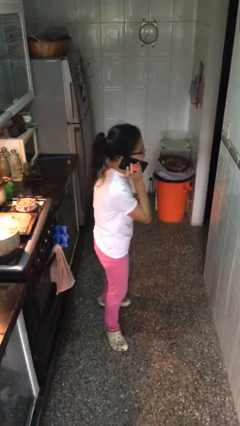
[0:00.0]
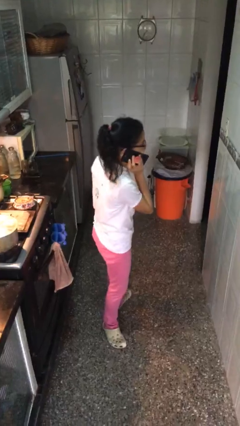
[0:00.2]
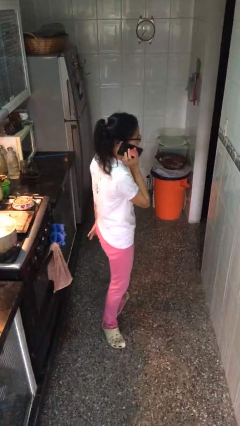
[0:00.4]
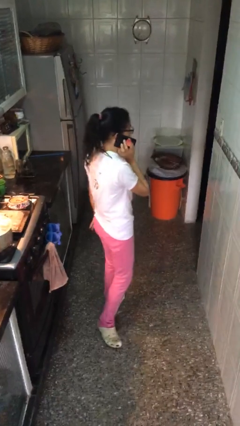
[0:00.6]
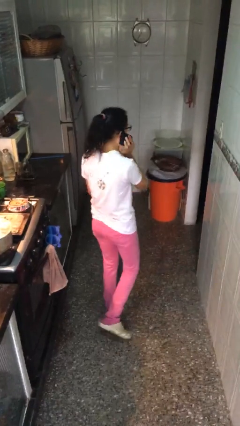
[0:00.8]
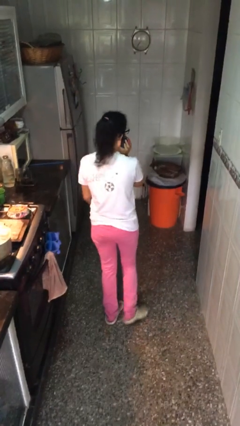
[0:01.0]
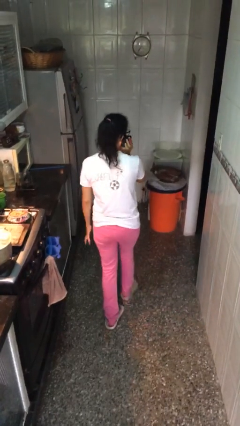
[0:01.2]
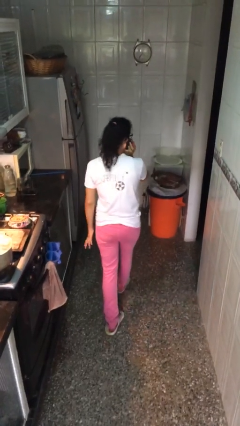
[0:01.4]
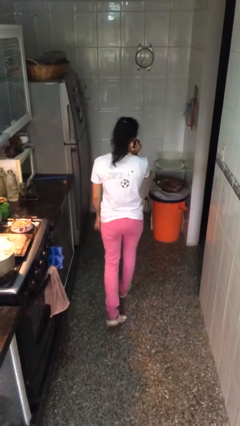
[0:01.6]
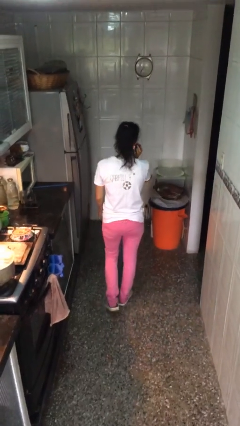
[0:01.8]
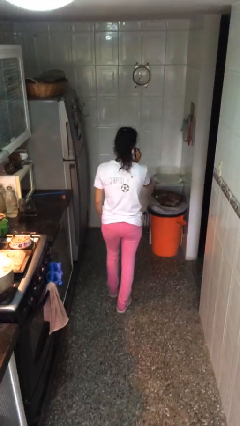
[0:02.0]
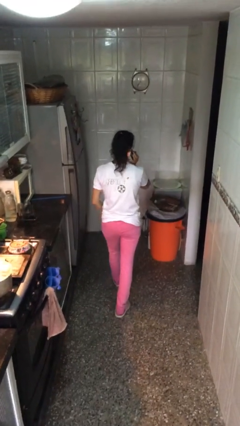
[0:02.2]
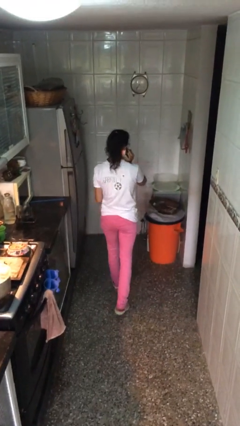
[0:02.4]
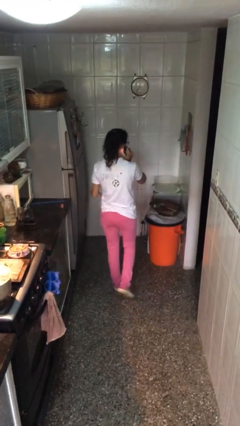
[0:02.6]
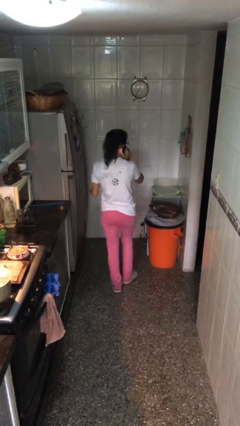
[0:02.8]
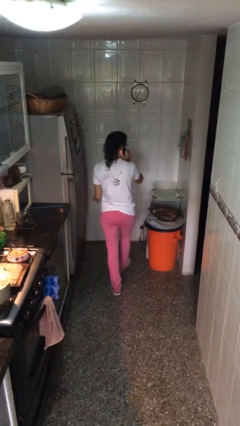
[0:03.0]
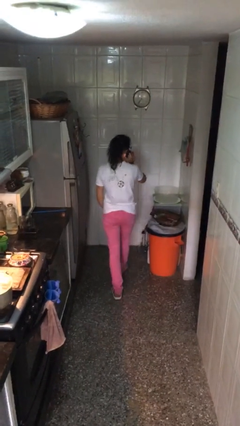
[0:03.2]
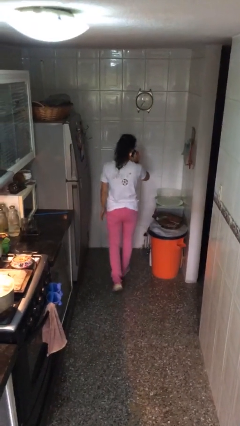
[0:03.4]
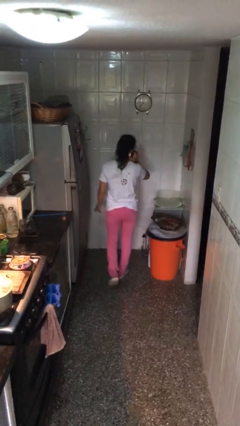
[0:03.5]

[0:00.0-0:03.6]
person talks on phone

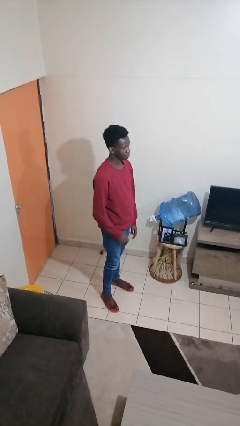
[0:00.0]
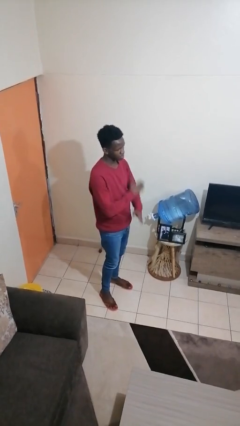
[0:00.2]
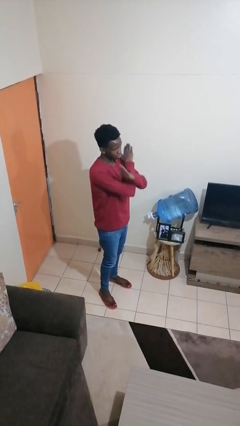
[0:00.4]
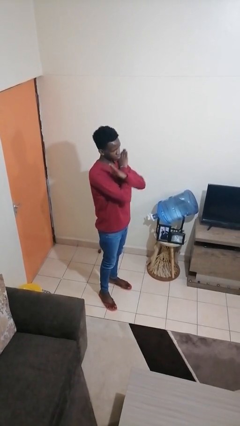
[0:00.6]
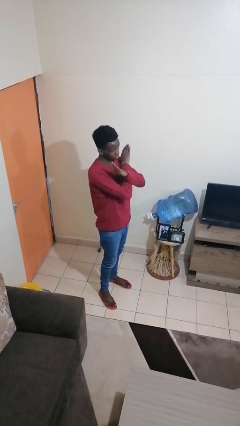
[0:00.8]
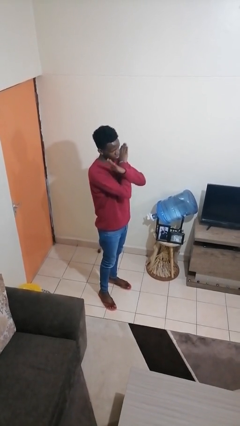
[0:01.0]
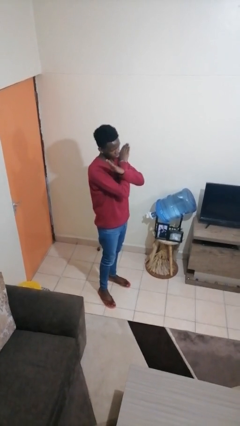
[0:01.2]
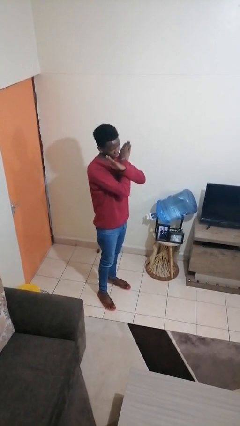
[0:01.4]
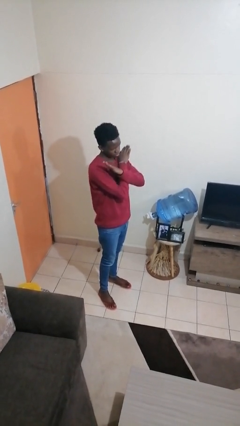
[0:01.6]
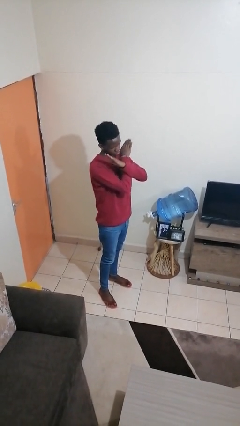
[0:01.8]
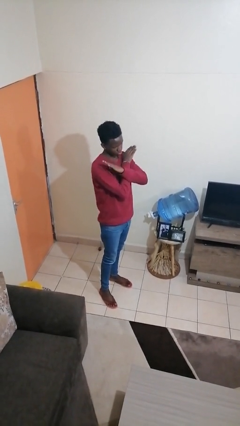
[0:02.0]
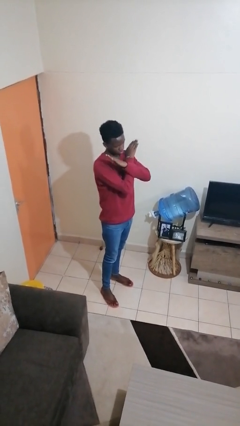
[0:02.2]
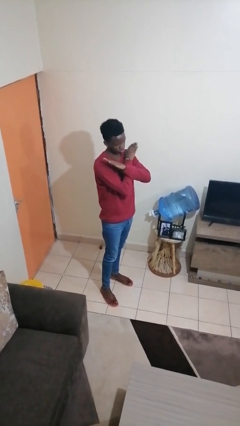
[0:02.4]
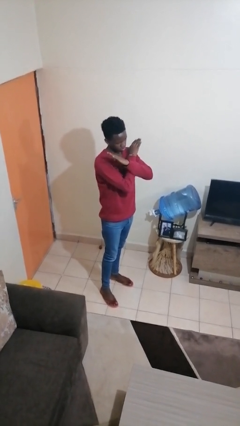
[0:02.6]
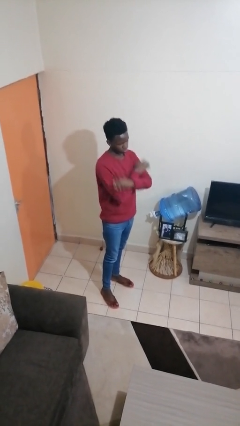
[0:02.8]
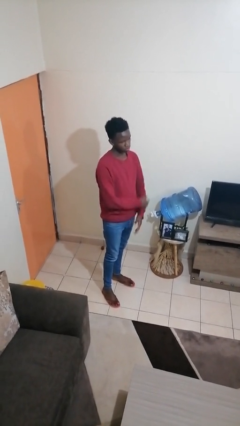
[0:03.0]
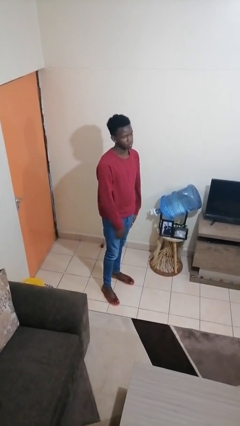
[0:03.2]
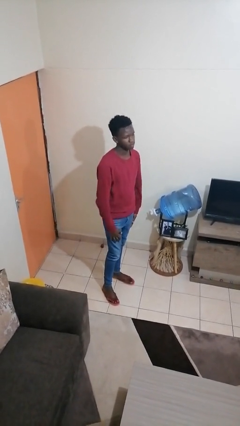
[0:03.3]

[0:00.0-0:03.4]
person gestures arms x

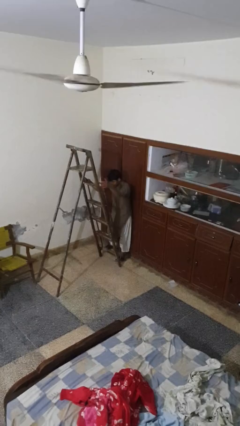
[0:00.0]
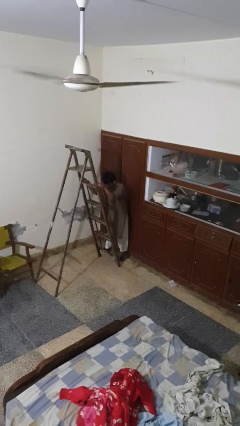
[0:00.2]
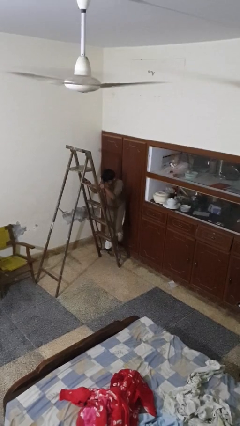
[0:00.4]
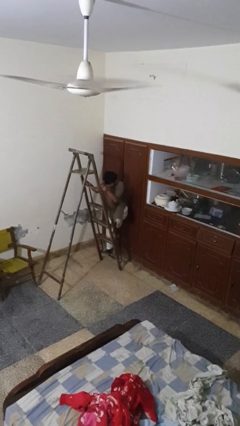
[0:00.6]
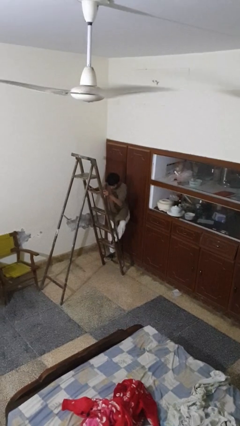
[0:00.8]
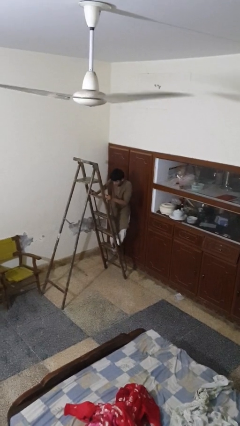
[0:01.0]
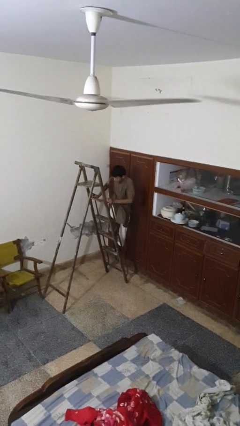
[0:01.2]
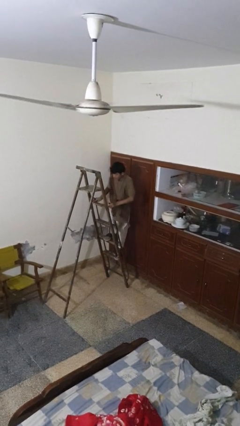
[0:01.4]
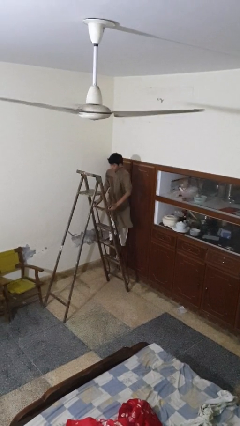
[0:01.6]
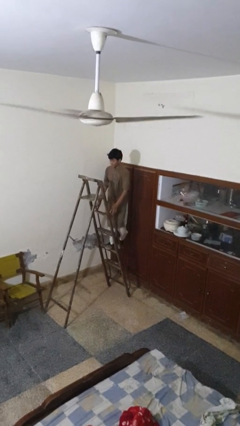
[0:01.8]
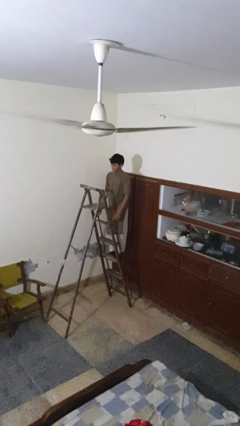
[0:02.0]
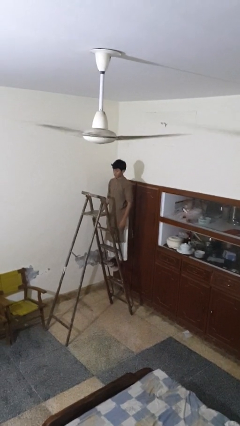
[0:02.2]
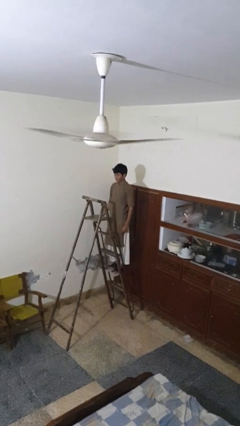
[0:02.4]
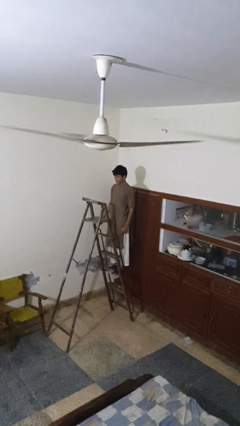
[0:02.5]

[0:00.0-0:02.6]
person climbs up ladder

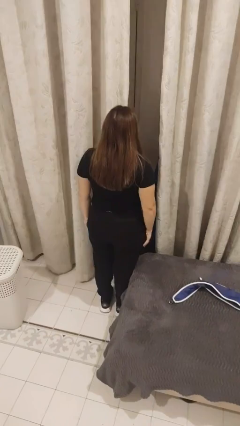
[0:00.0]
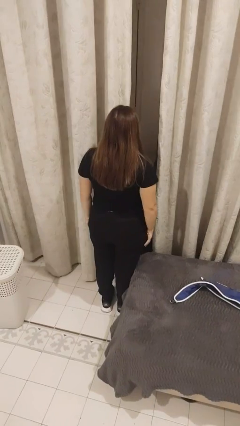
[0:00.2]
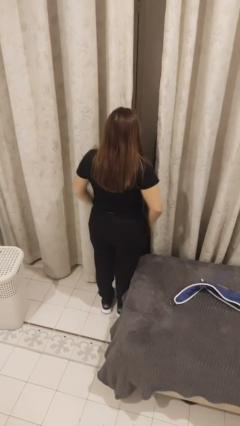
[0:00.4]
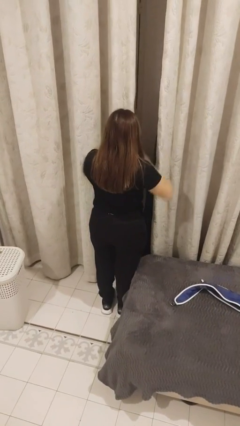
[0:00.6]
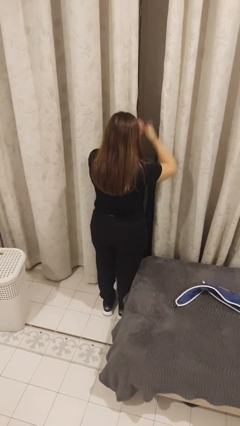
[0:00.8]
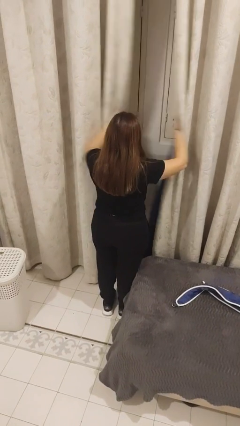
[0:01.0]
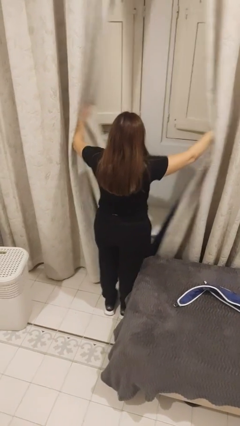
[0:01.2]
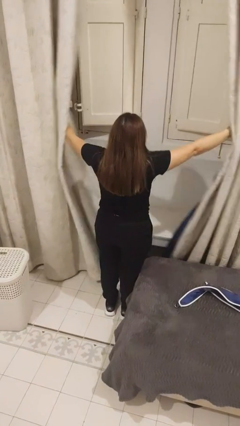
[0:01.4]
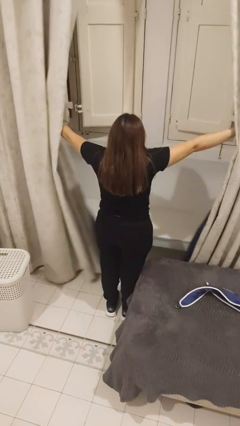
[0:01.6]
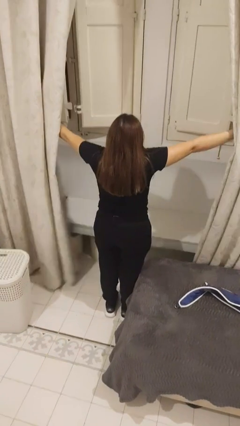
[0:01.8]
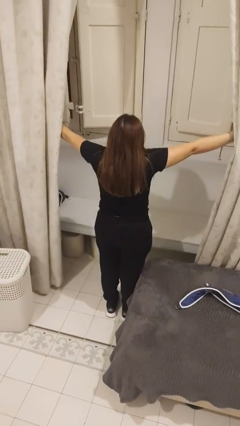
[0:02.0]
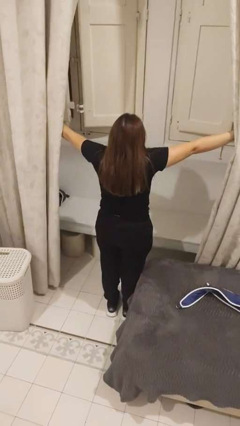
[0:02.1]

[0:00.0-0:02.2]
person opens curtains

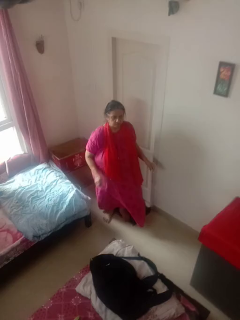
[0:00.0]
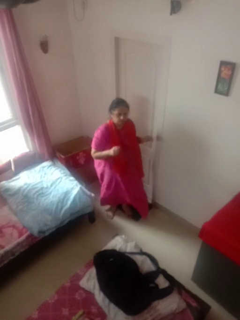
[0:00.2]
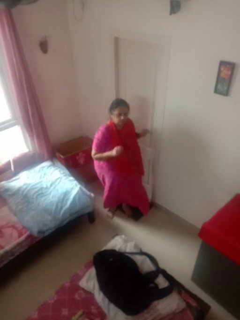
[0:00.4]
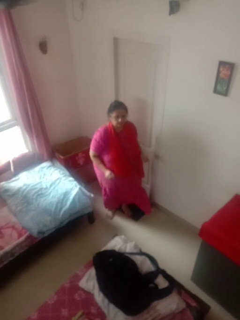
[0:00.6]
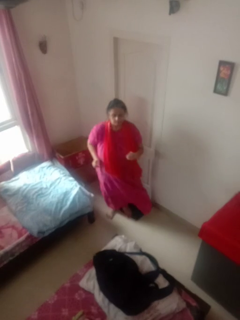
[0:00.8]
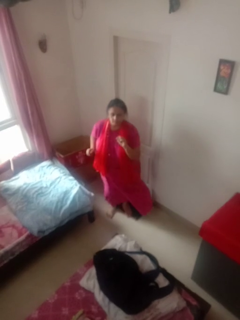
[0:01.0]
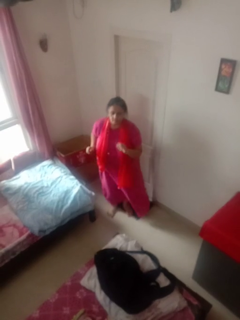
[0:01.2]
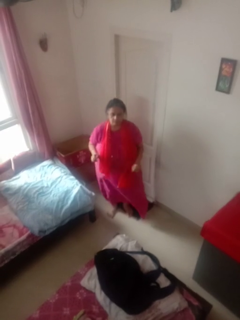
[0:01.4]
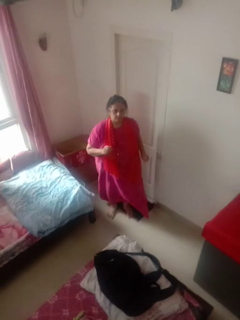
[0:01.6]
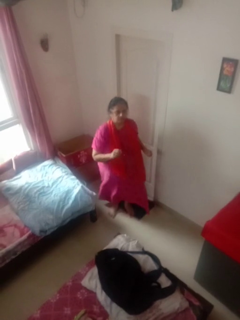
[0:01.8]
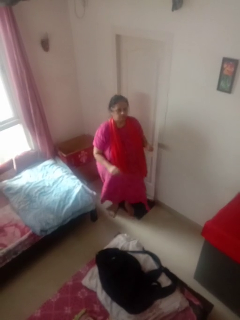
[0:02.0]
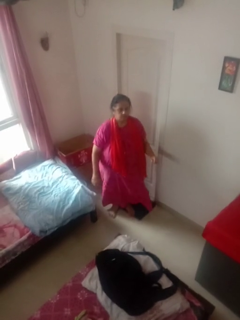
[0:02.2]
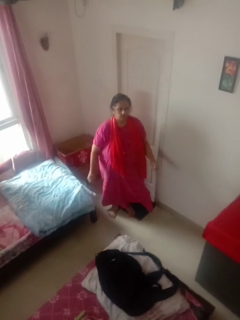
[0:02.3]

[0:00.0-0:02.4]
person dances in place

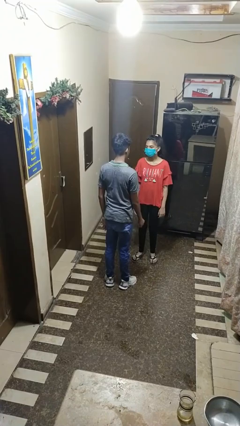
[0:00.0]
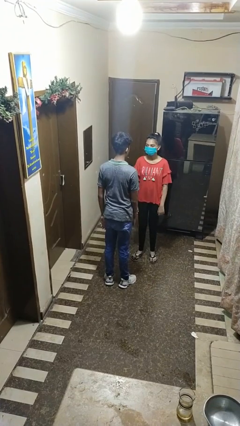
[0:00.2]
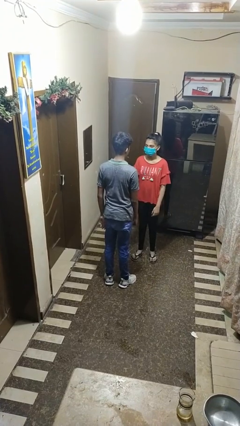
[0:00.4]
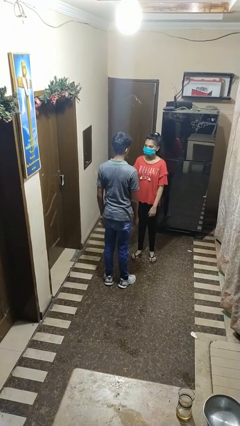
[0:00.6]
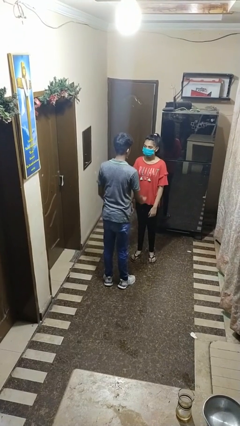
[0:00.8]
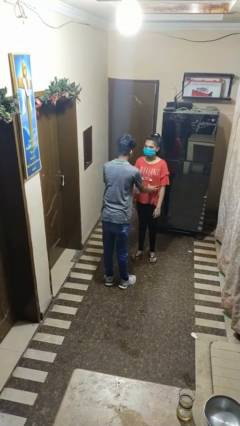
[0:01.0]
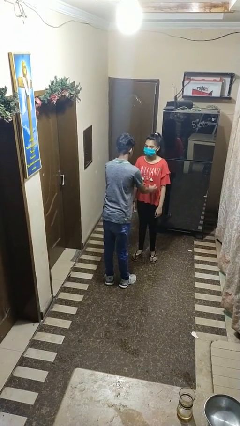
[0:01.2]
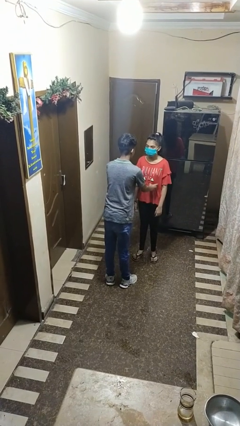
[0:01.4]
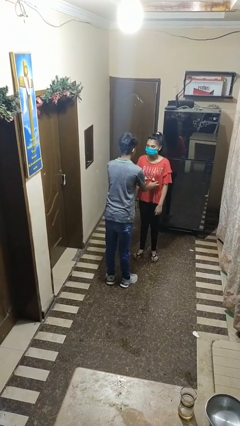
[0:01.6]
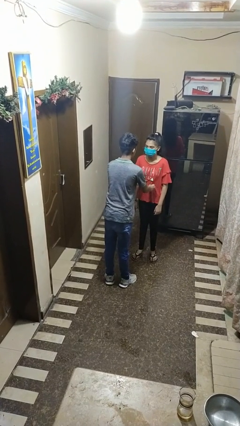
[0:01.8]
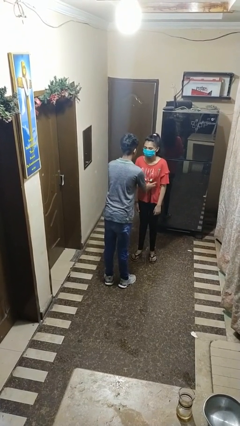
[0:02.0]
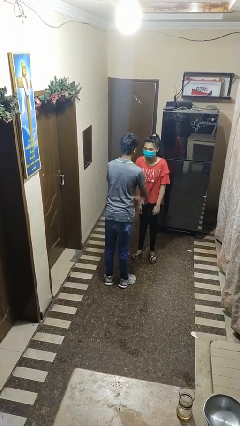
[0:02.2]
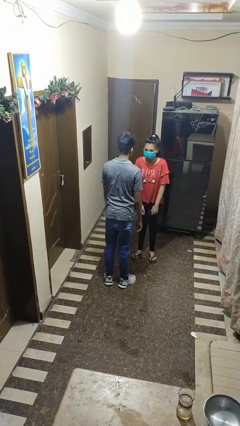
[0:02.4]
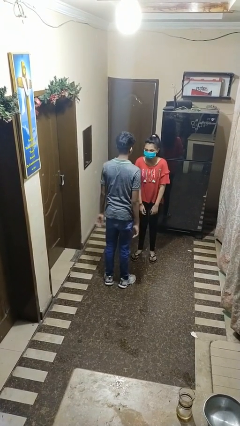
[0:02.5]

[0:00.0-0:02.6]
person tickles person

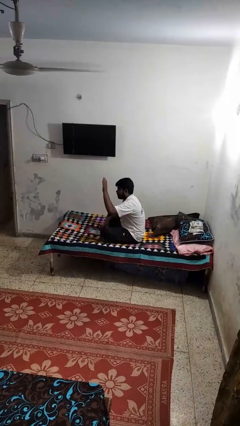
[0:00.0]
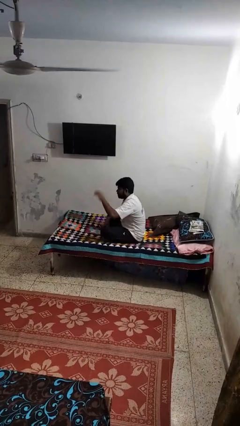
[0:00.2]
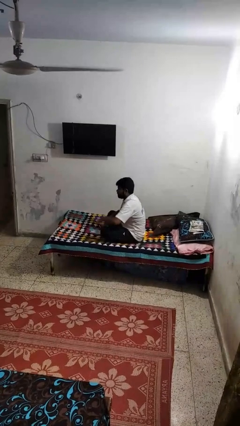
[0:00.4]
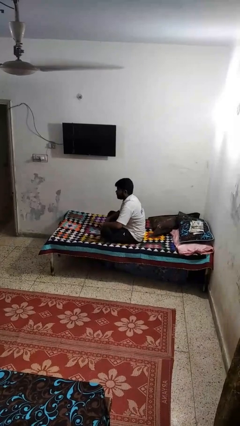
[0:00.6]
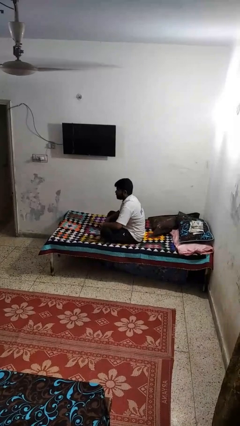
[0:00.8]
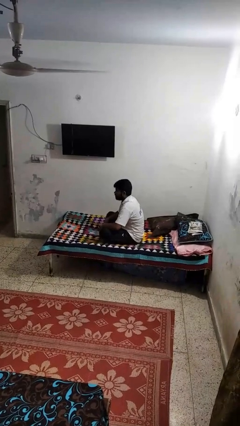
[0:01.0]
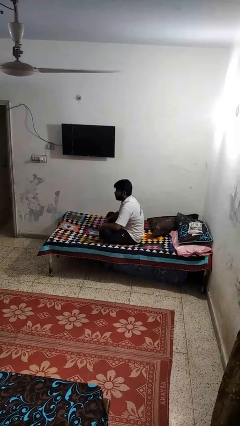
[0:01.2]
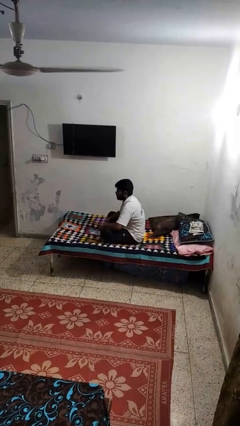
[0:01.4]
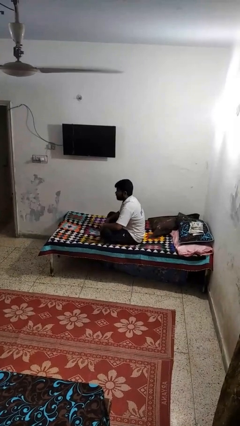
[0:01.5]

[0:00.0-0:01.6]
person gestures lower hand
